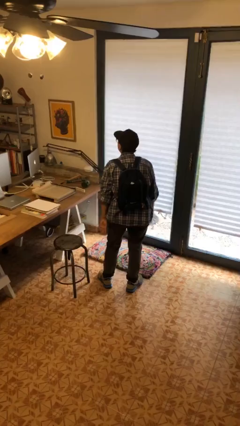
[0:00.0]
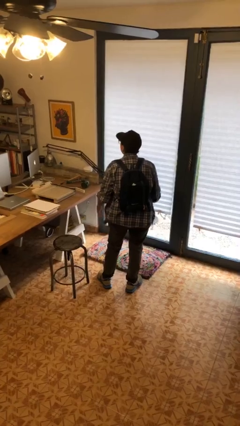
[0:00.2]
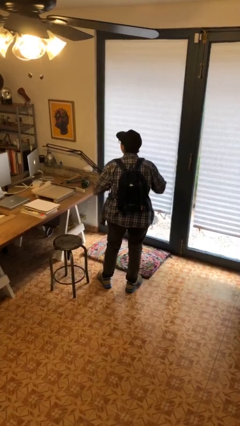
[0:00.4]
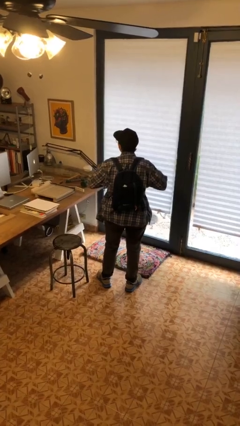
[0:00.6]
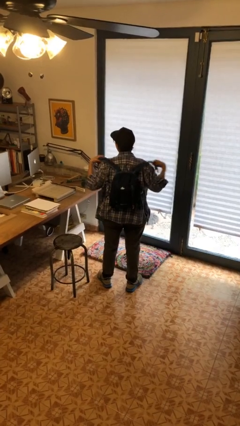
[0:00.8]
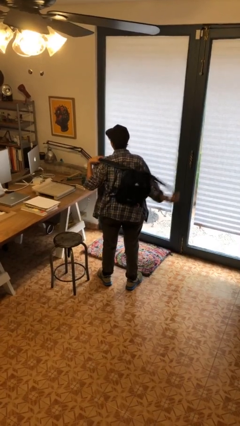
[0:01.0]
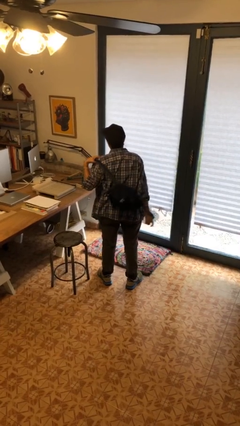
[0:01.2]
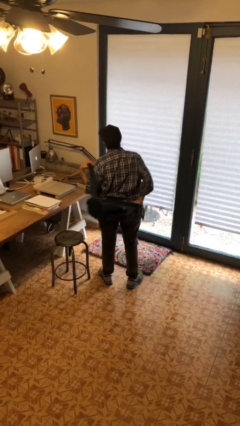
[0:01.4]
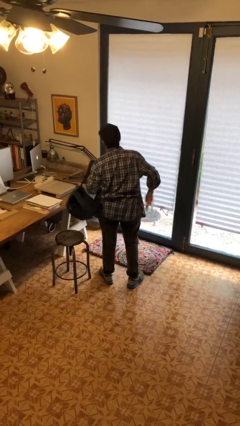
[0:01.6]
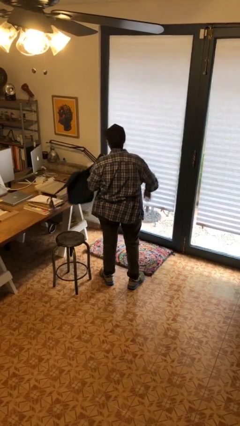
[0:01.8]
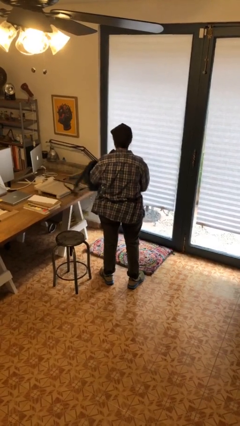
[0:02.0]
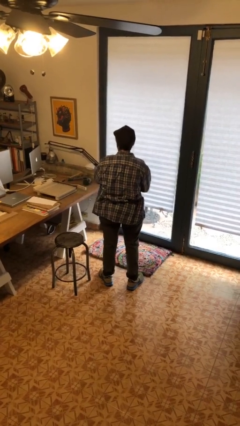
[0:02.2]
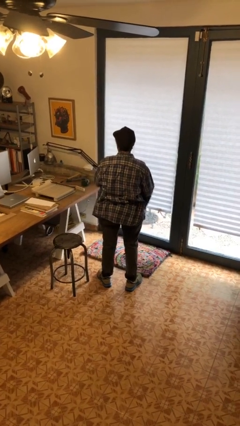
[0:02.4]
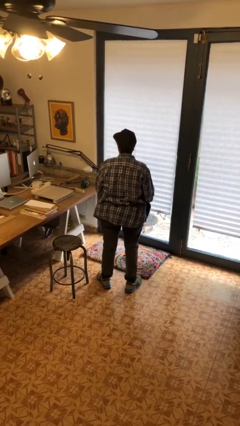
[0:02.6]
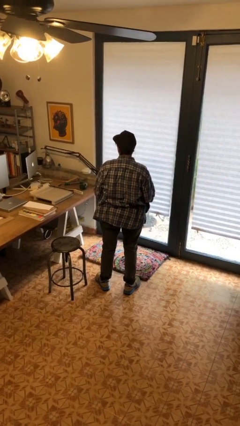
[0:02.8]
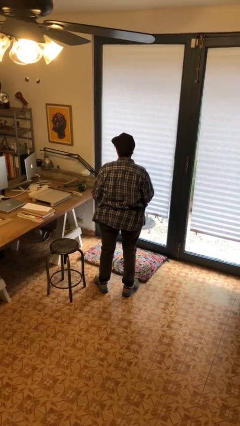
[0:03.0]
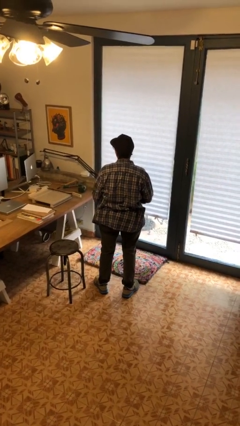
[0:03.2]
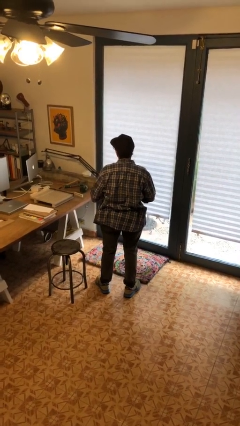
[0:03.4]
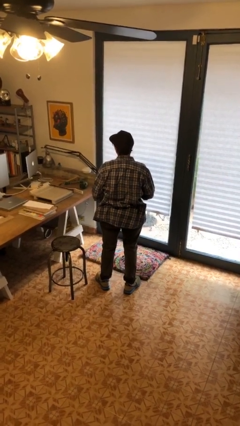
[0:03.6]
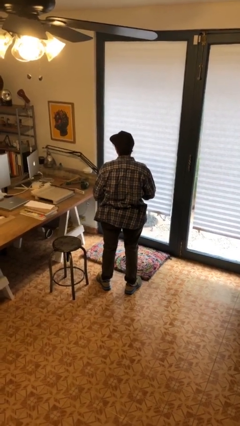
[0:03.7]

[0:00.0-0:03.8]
person takes off backpack

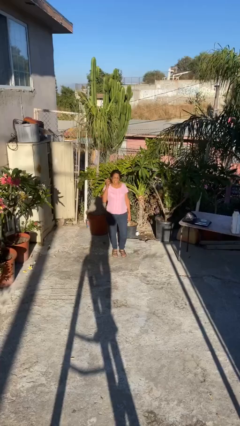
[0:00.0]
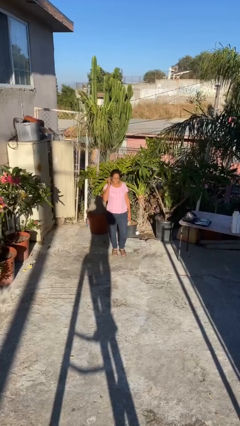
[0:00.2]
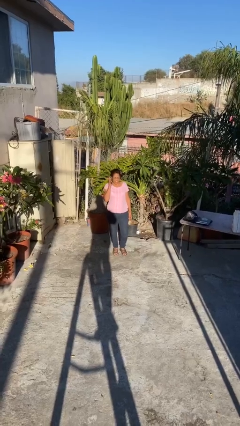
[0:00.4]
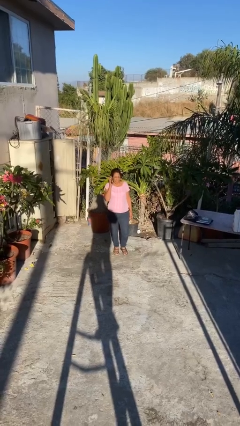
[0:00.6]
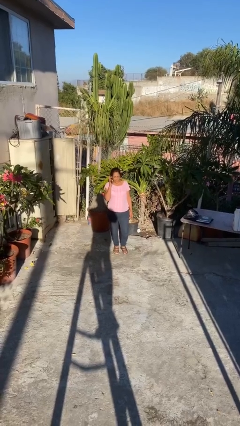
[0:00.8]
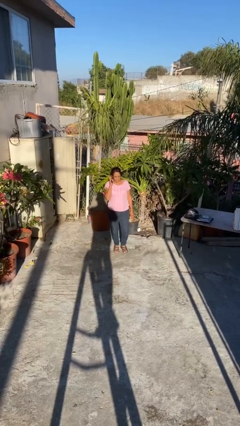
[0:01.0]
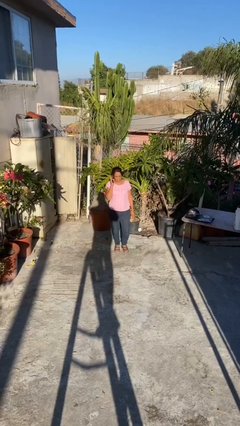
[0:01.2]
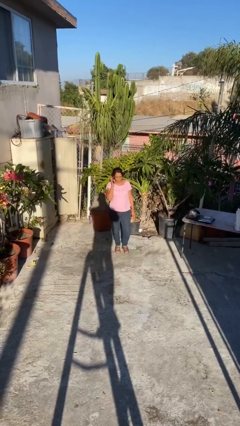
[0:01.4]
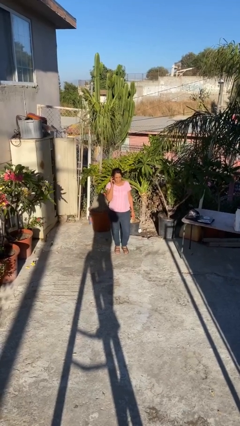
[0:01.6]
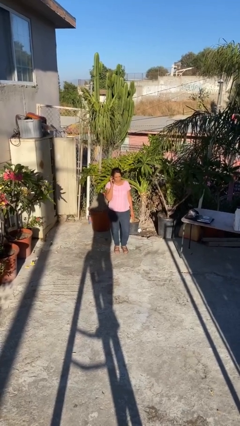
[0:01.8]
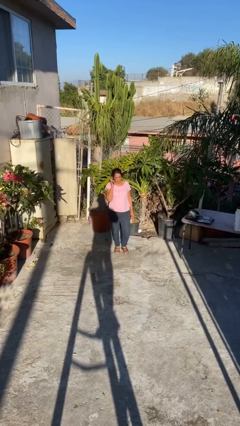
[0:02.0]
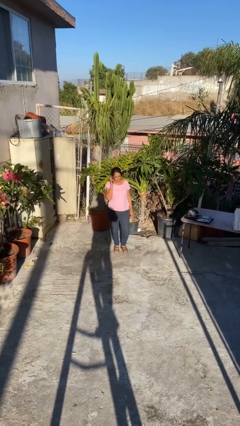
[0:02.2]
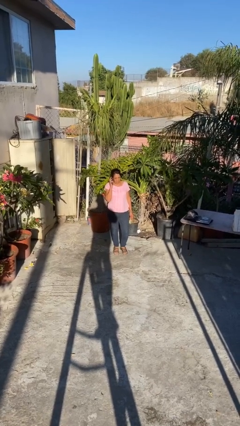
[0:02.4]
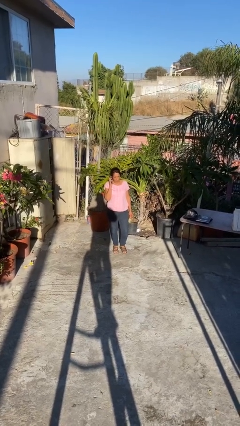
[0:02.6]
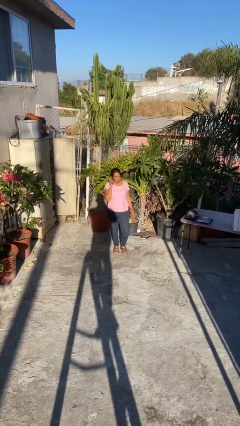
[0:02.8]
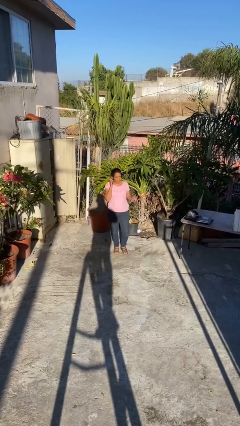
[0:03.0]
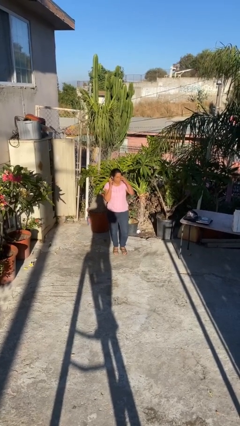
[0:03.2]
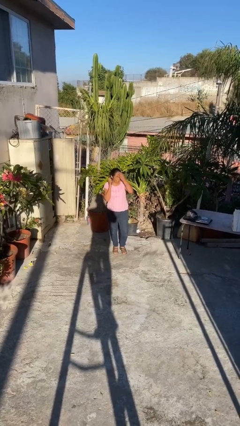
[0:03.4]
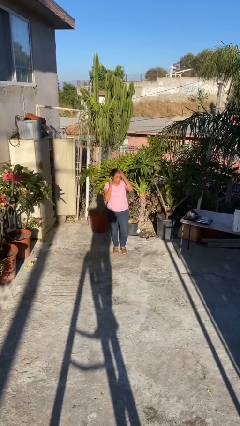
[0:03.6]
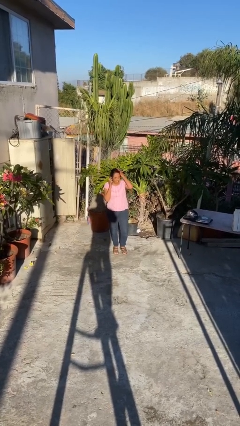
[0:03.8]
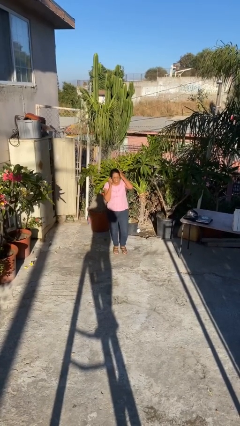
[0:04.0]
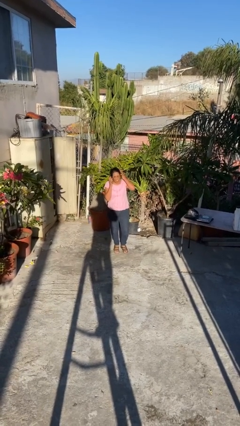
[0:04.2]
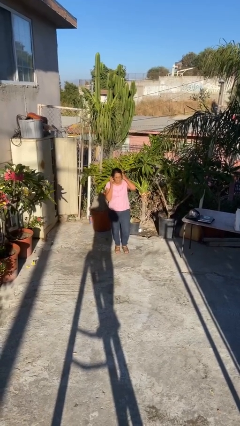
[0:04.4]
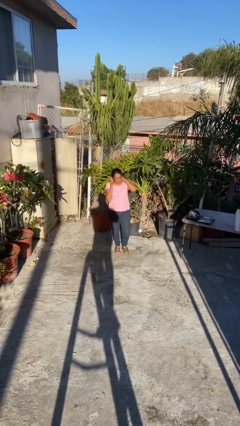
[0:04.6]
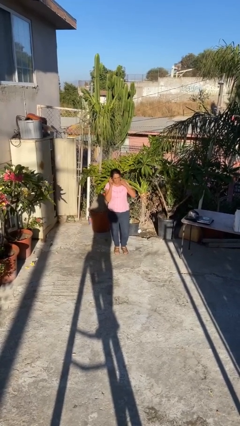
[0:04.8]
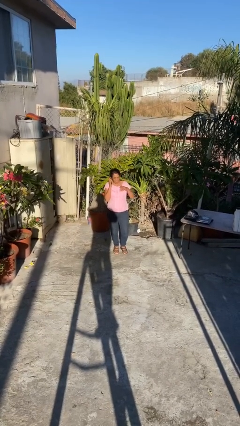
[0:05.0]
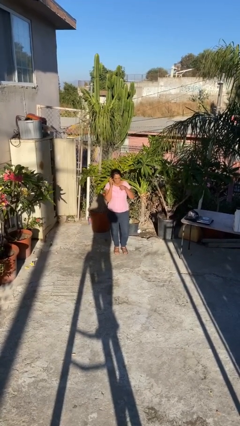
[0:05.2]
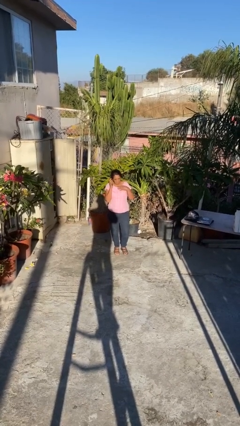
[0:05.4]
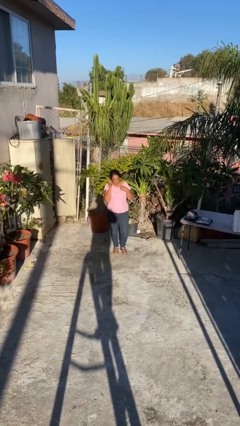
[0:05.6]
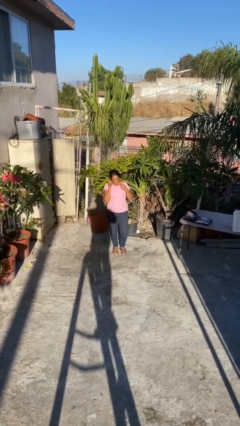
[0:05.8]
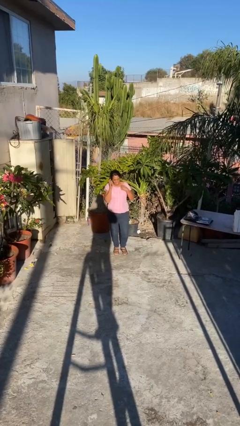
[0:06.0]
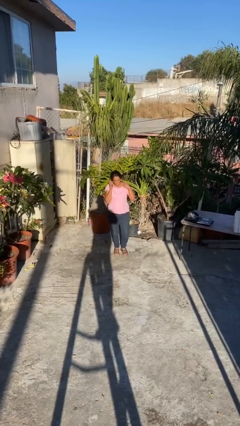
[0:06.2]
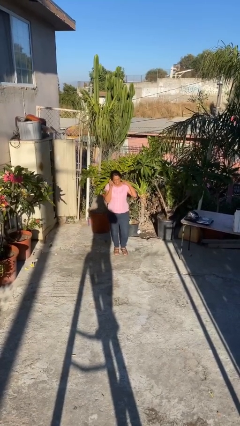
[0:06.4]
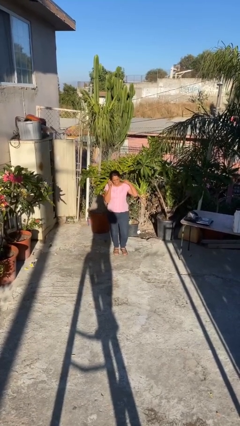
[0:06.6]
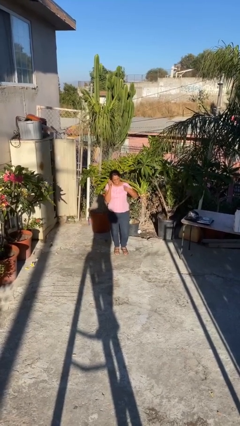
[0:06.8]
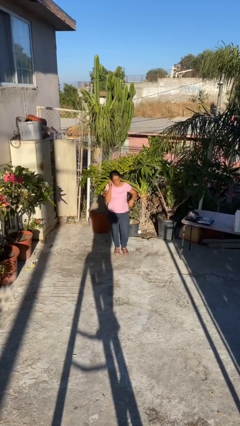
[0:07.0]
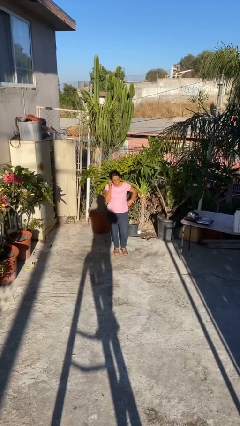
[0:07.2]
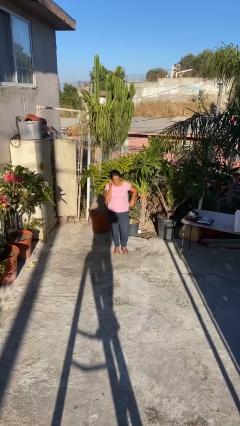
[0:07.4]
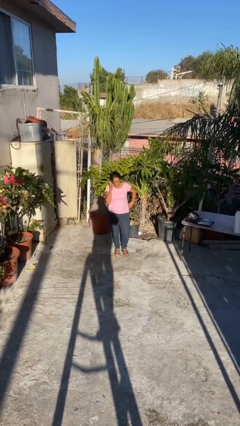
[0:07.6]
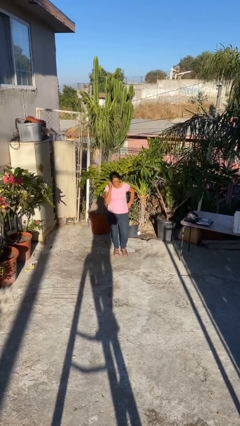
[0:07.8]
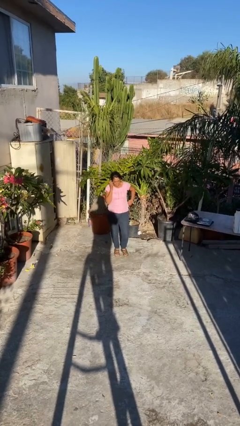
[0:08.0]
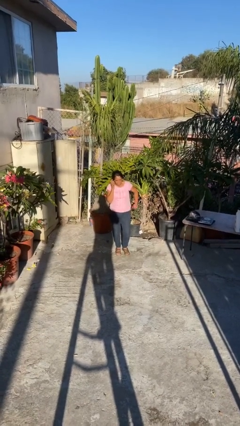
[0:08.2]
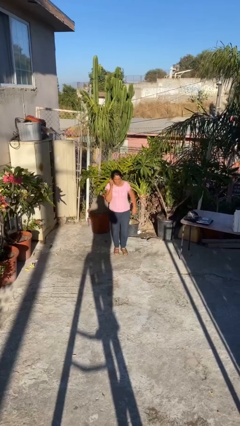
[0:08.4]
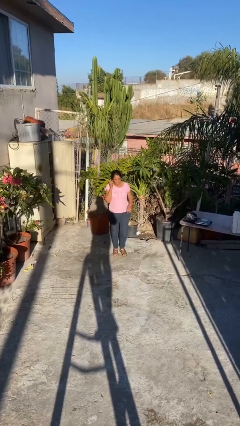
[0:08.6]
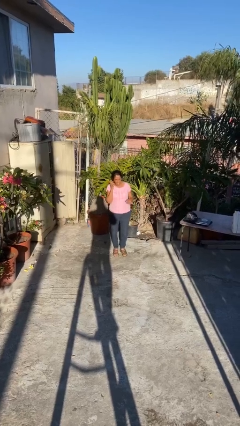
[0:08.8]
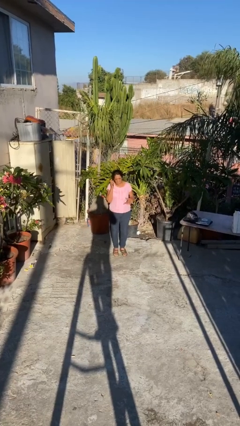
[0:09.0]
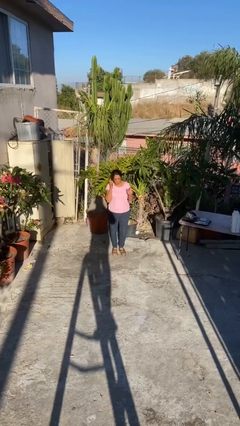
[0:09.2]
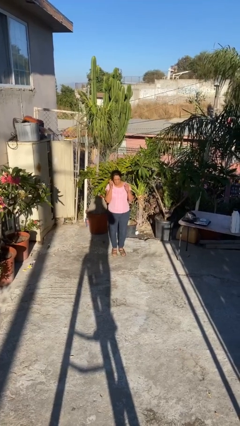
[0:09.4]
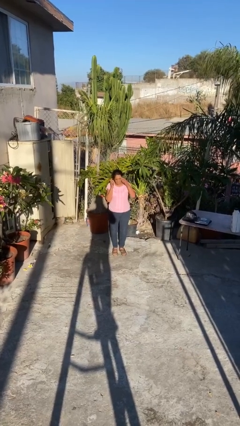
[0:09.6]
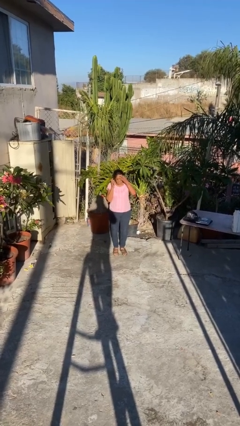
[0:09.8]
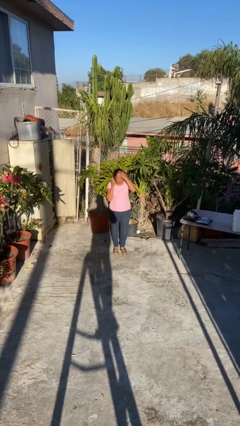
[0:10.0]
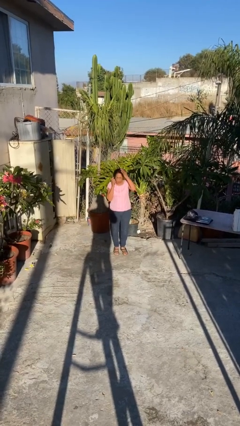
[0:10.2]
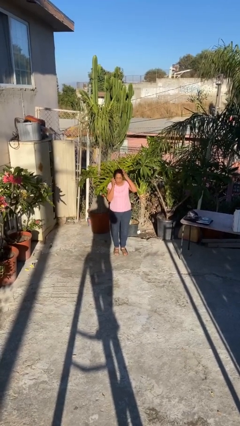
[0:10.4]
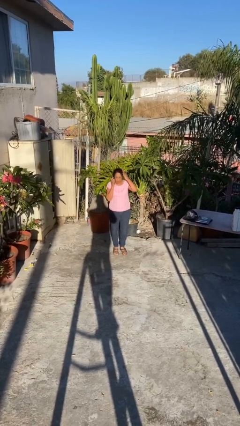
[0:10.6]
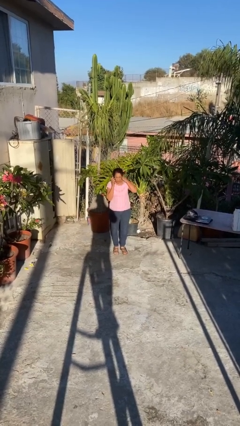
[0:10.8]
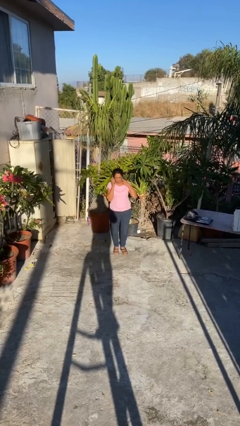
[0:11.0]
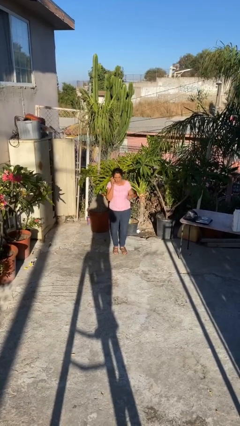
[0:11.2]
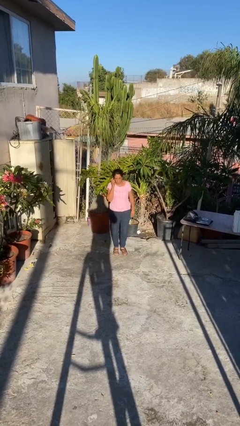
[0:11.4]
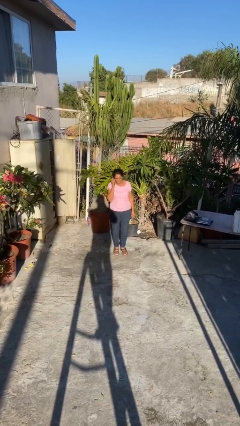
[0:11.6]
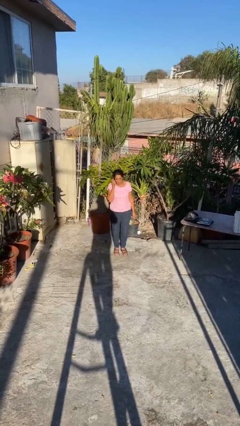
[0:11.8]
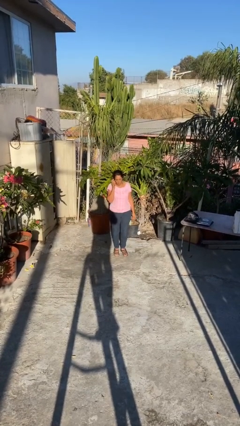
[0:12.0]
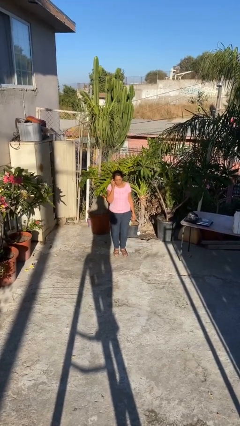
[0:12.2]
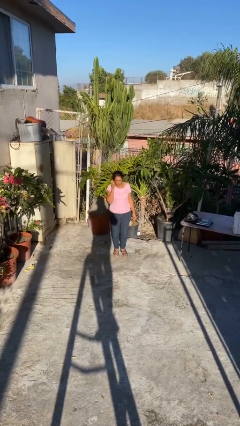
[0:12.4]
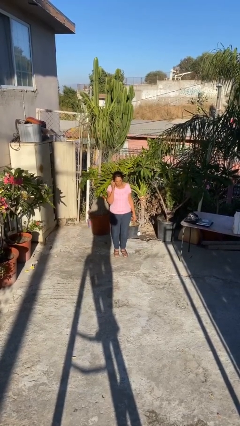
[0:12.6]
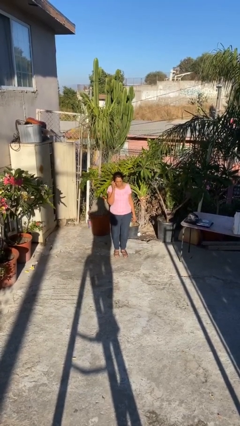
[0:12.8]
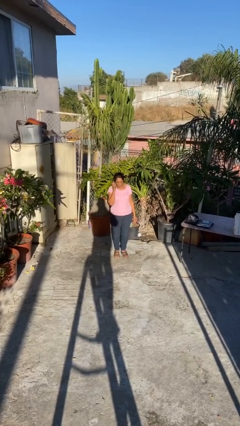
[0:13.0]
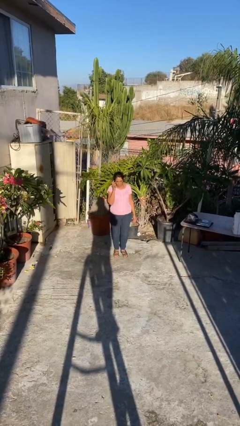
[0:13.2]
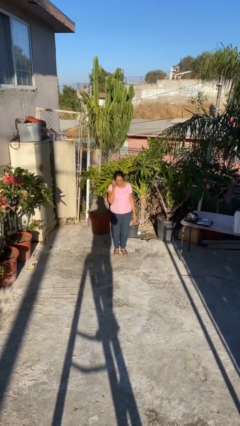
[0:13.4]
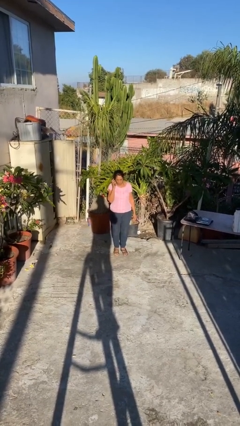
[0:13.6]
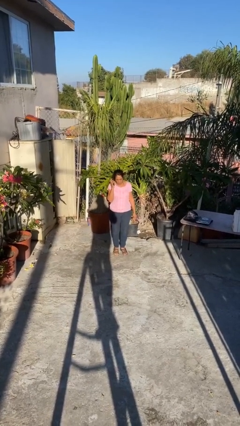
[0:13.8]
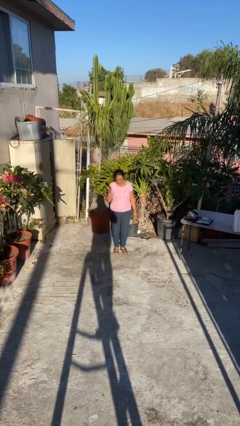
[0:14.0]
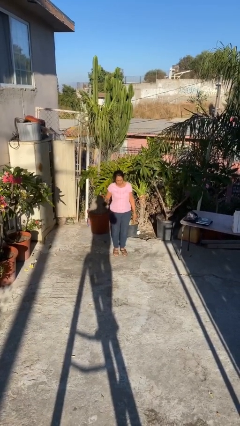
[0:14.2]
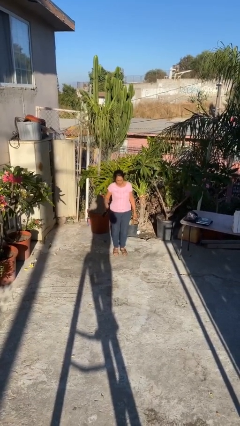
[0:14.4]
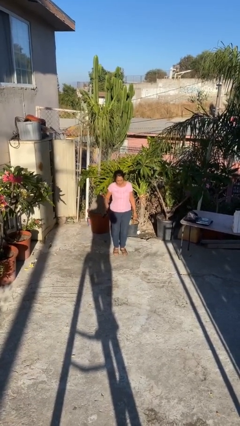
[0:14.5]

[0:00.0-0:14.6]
person talks on phone
